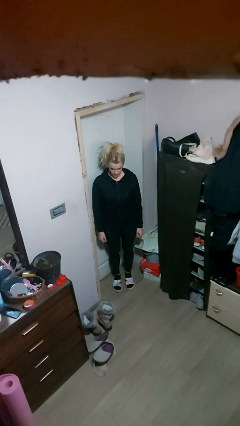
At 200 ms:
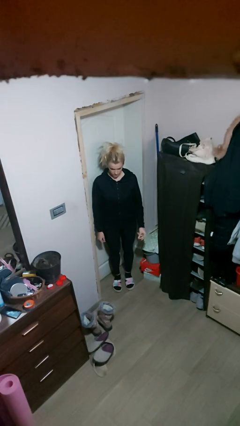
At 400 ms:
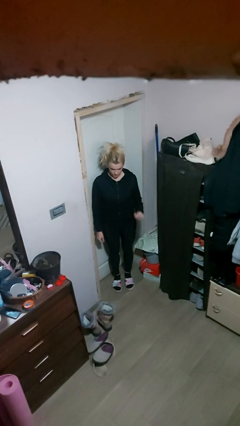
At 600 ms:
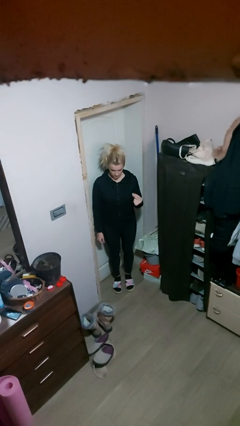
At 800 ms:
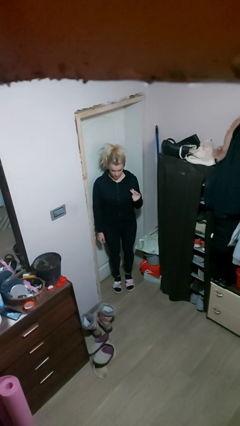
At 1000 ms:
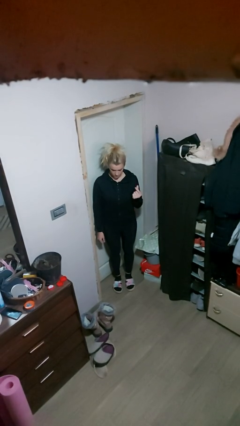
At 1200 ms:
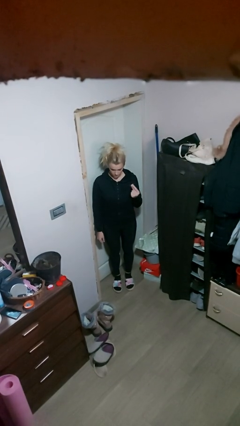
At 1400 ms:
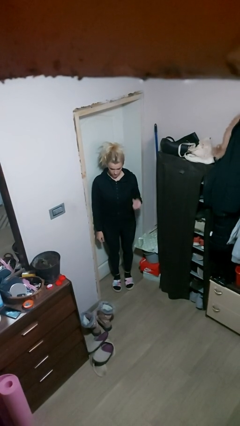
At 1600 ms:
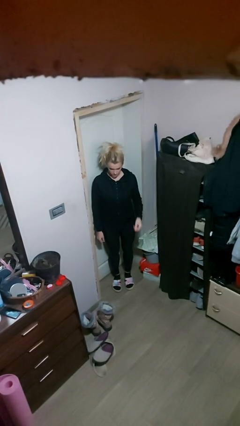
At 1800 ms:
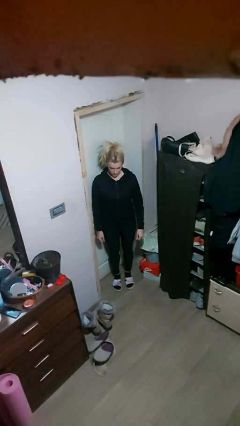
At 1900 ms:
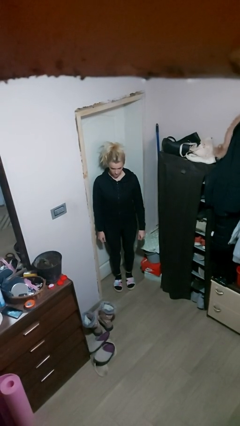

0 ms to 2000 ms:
person snaps fingers

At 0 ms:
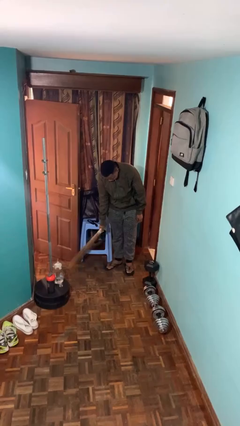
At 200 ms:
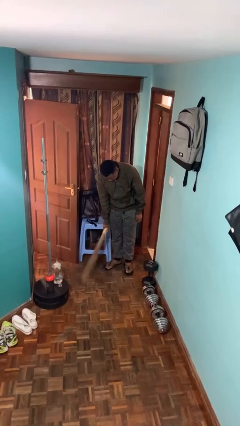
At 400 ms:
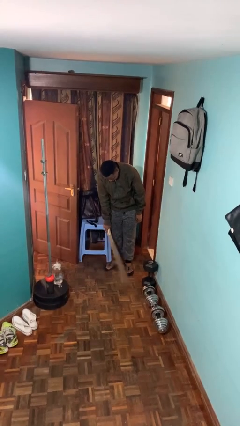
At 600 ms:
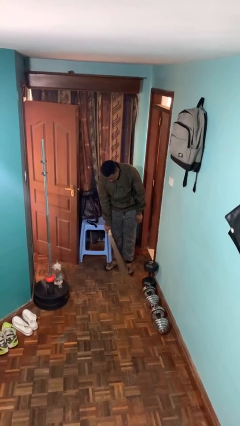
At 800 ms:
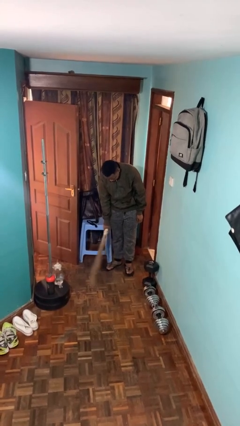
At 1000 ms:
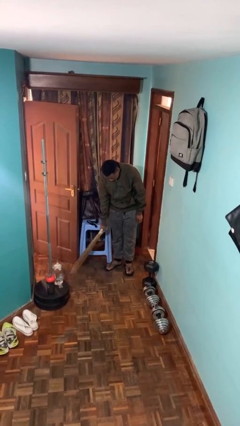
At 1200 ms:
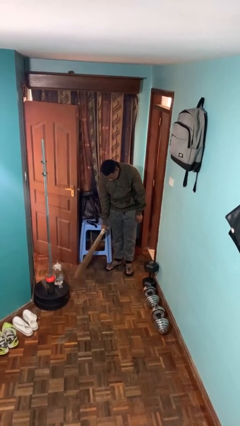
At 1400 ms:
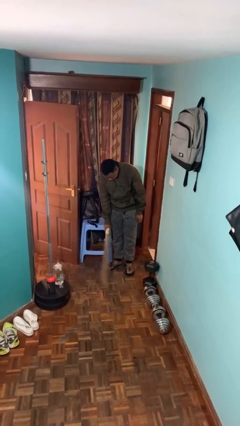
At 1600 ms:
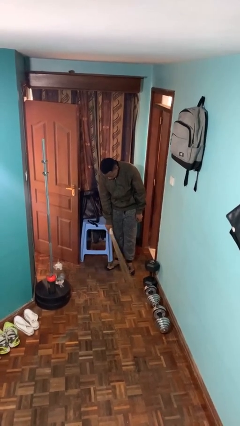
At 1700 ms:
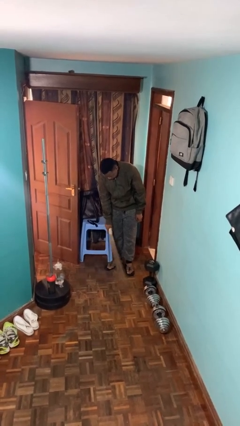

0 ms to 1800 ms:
person sweeps floor

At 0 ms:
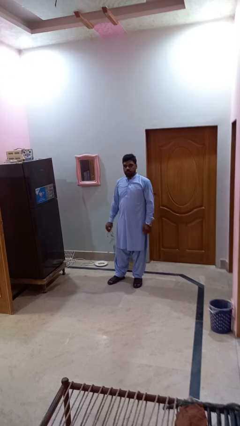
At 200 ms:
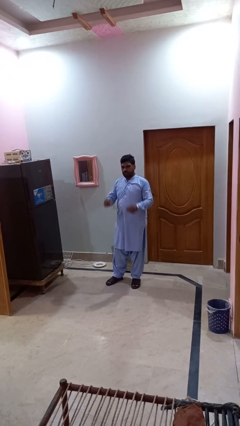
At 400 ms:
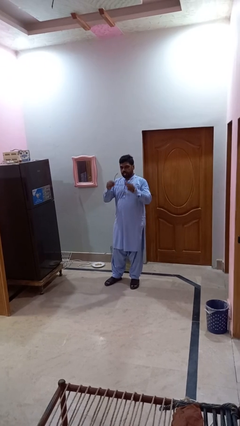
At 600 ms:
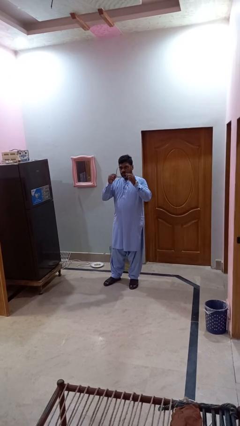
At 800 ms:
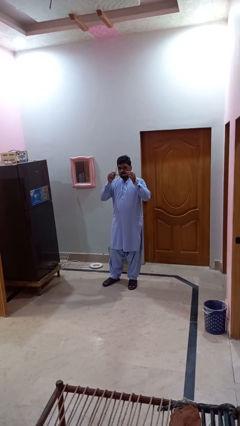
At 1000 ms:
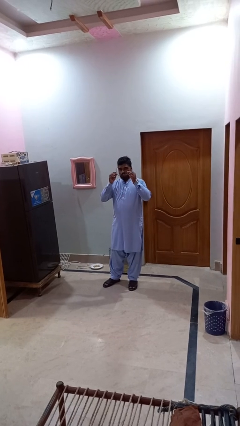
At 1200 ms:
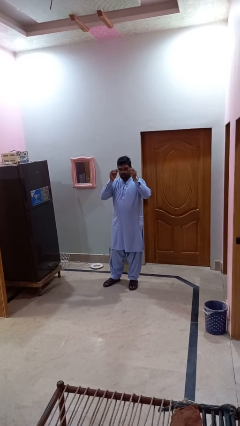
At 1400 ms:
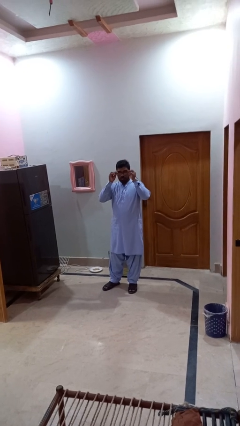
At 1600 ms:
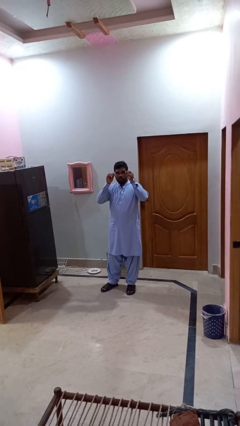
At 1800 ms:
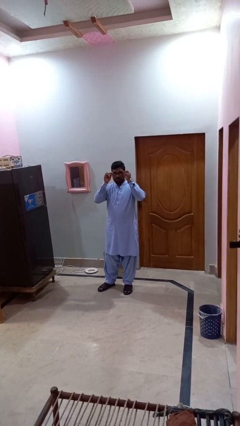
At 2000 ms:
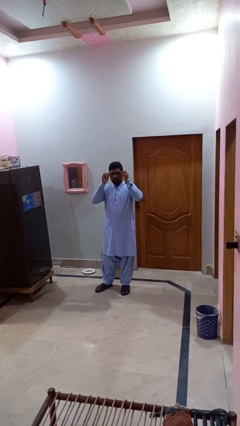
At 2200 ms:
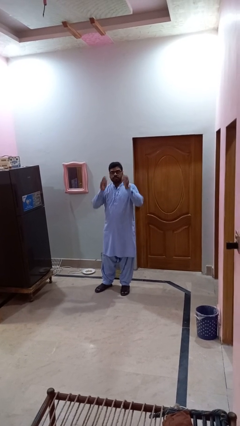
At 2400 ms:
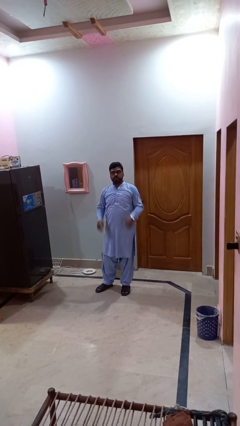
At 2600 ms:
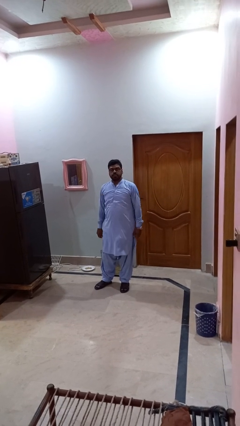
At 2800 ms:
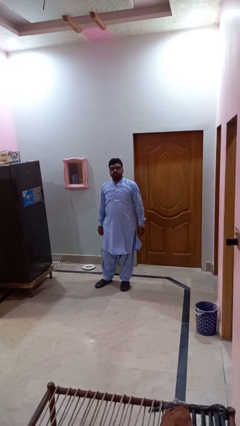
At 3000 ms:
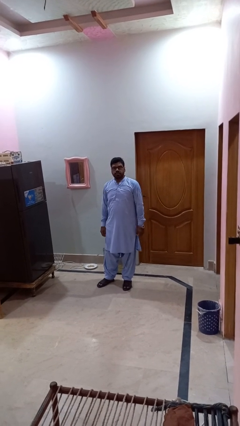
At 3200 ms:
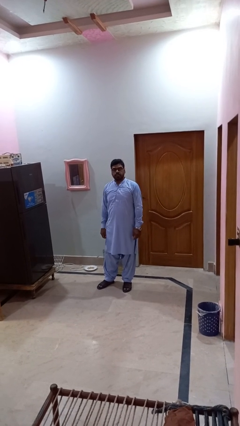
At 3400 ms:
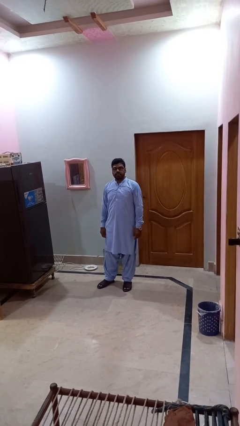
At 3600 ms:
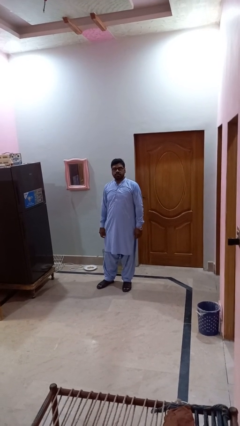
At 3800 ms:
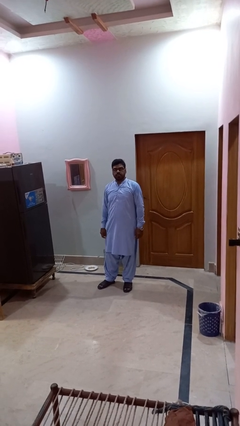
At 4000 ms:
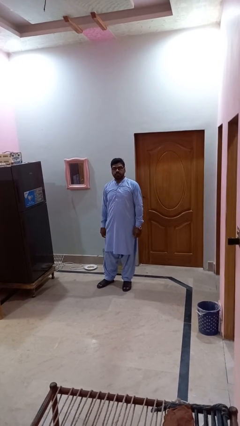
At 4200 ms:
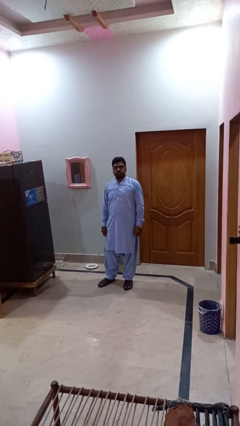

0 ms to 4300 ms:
person puts on glasses

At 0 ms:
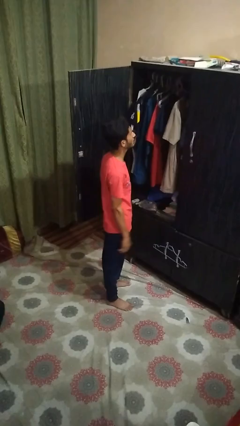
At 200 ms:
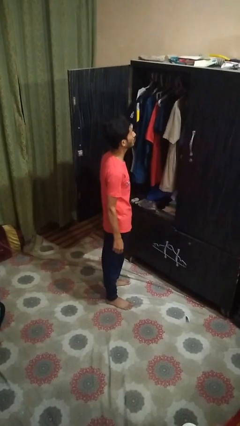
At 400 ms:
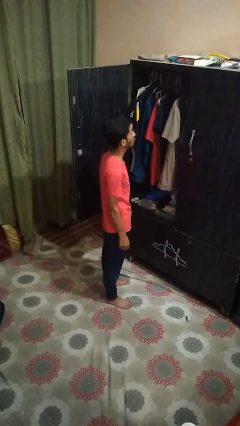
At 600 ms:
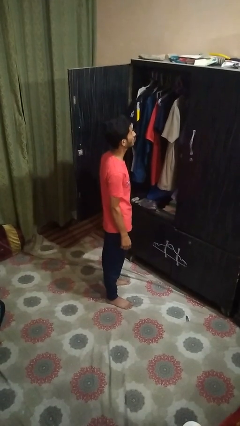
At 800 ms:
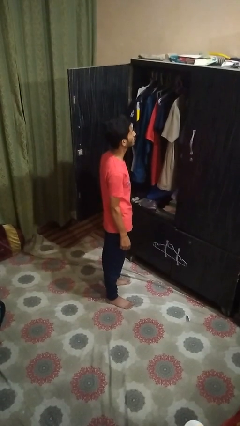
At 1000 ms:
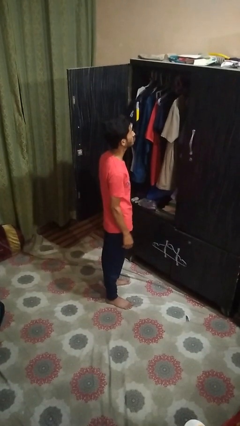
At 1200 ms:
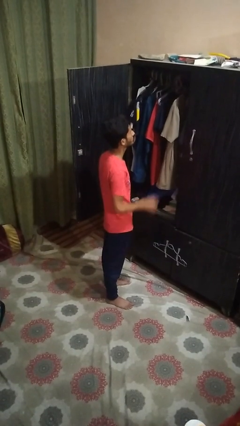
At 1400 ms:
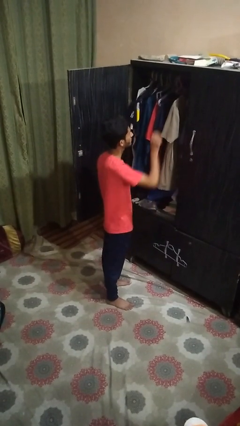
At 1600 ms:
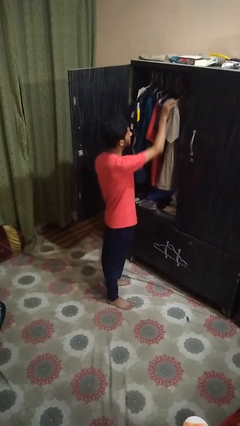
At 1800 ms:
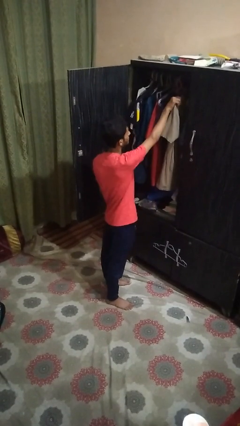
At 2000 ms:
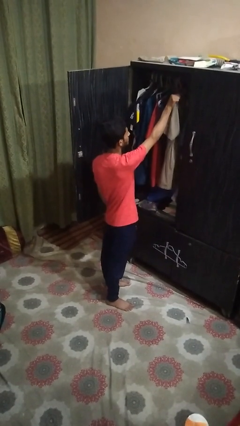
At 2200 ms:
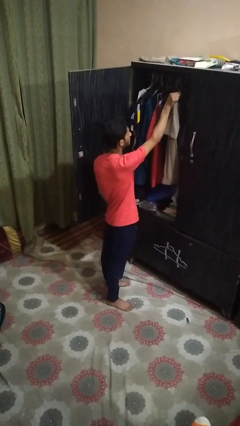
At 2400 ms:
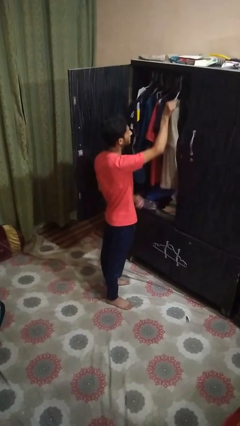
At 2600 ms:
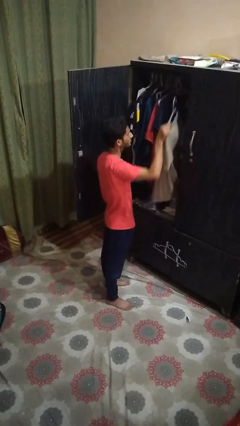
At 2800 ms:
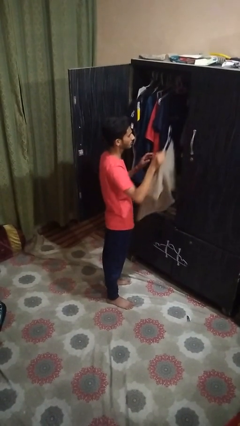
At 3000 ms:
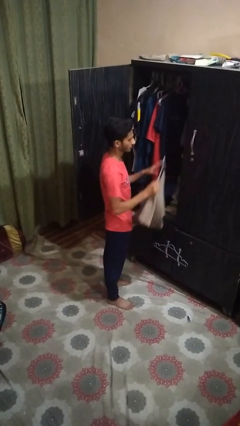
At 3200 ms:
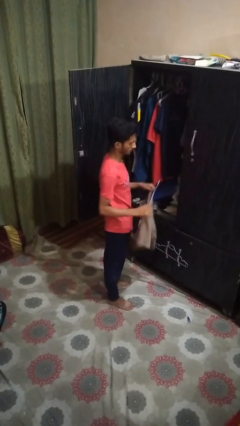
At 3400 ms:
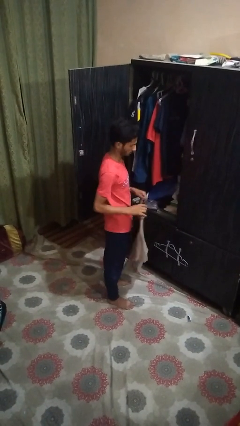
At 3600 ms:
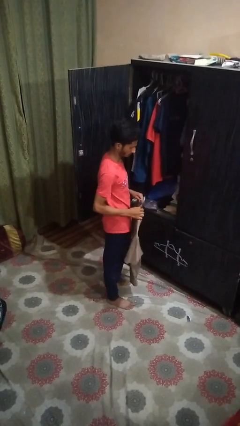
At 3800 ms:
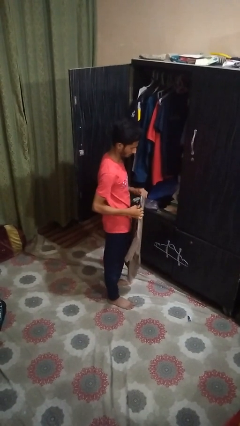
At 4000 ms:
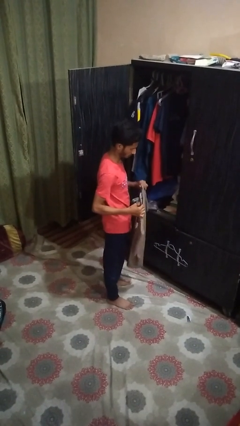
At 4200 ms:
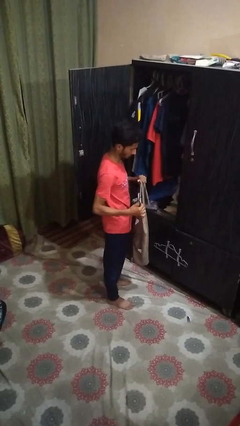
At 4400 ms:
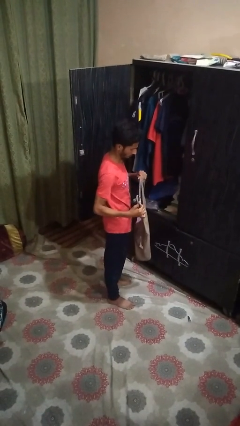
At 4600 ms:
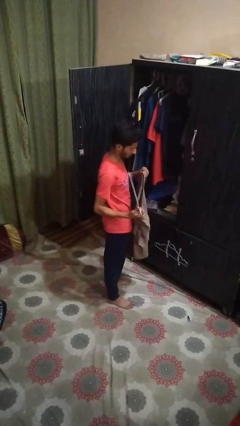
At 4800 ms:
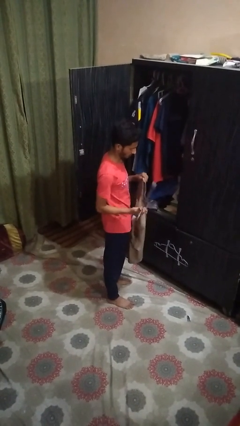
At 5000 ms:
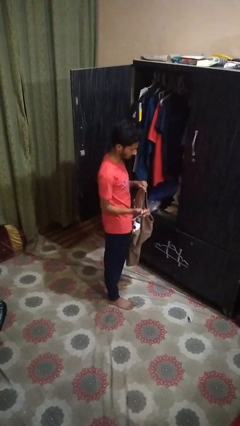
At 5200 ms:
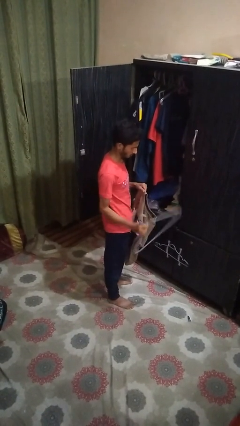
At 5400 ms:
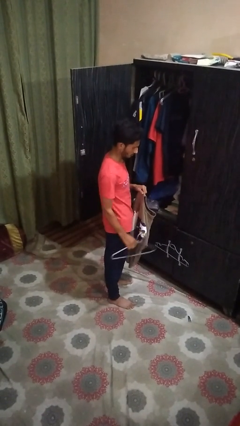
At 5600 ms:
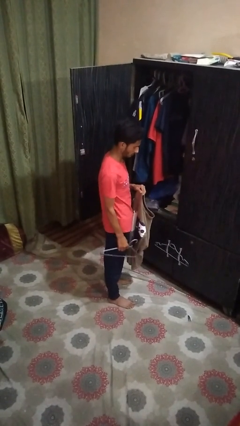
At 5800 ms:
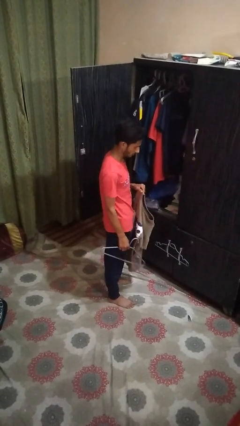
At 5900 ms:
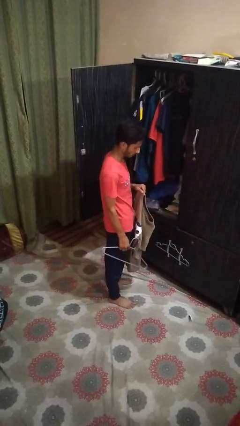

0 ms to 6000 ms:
person takes clothes from closet

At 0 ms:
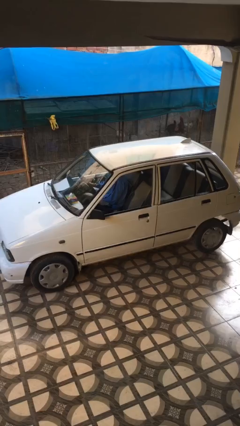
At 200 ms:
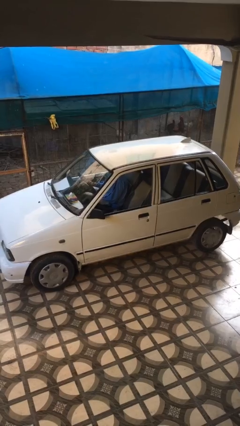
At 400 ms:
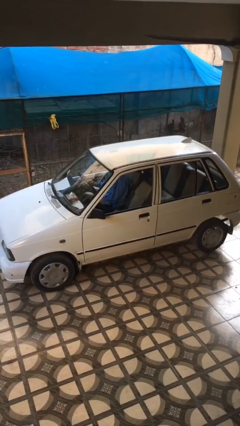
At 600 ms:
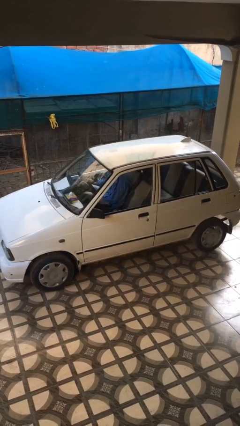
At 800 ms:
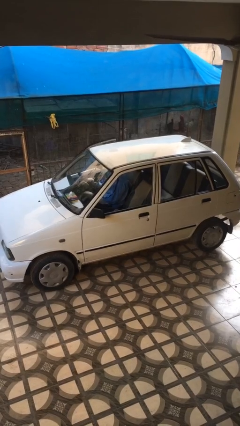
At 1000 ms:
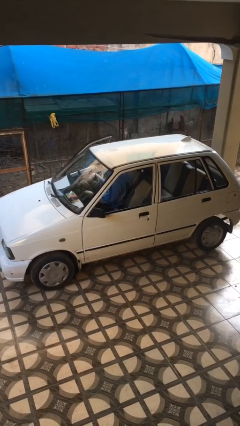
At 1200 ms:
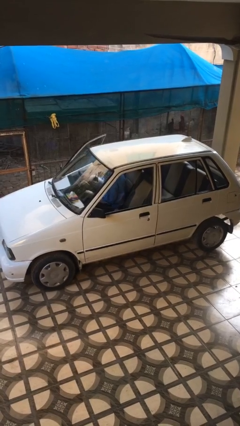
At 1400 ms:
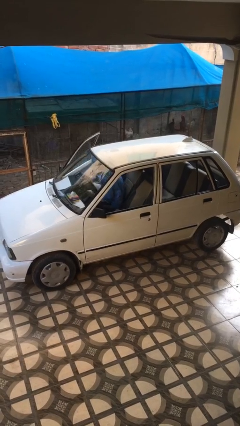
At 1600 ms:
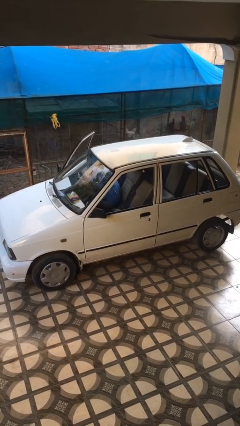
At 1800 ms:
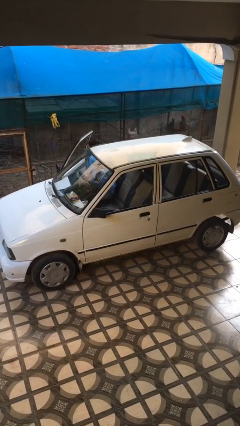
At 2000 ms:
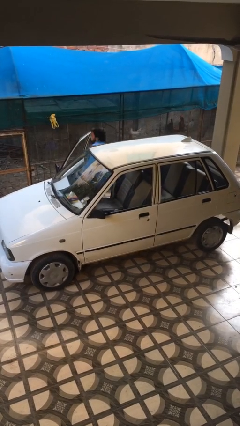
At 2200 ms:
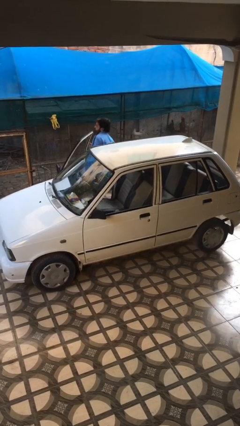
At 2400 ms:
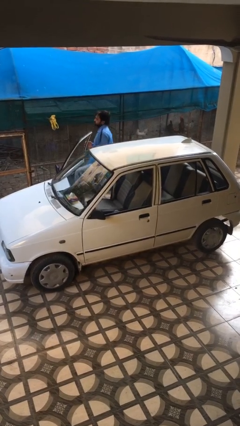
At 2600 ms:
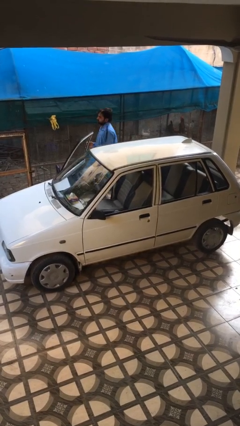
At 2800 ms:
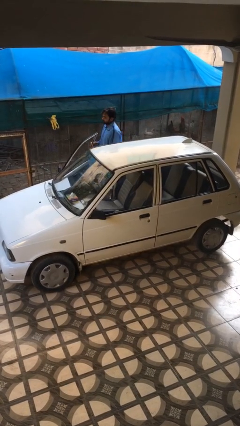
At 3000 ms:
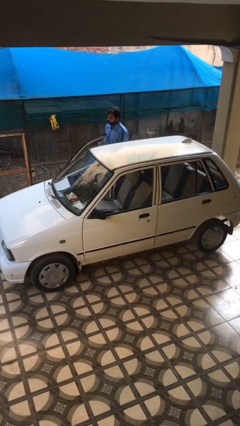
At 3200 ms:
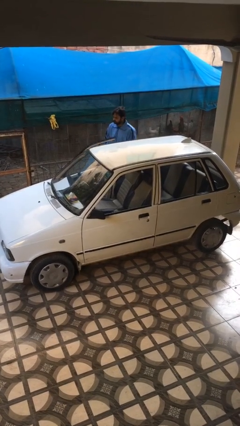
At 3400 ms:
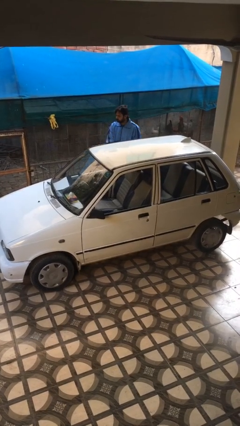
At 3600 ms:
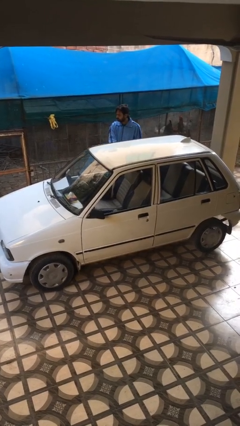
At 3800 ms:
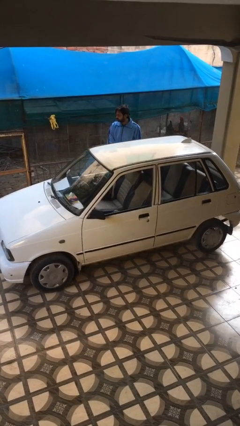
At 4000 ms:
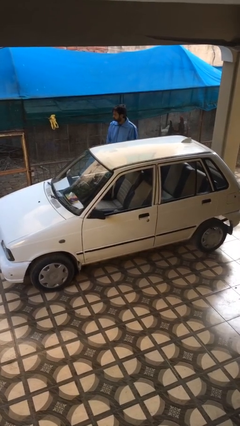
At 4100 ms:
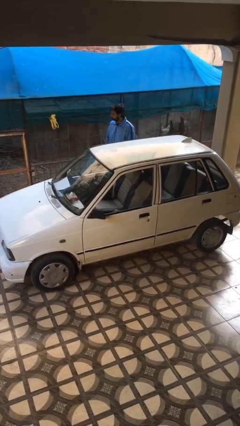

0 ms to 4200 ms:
car drops off person
